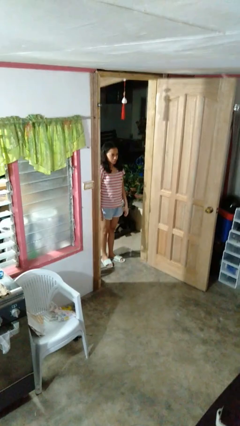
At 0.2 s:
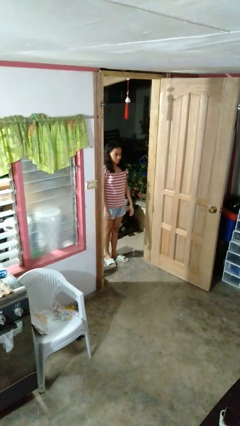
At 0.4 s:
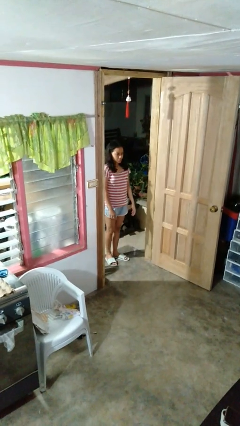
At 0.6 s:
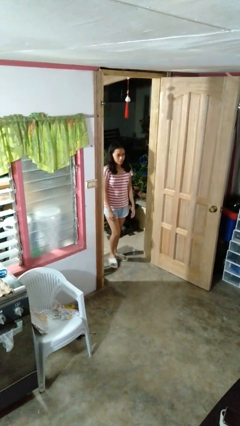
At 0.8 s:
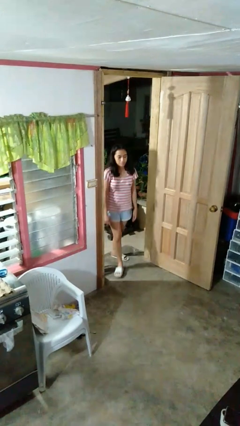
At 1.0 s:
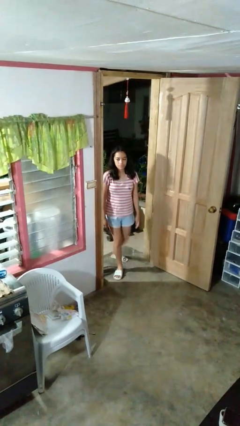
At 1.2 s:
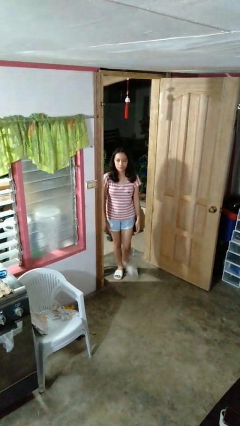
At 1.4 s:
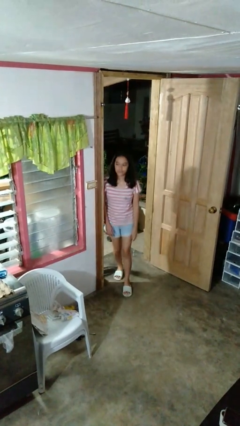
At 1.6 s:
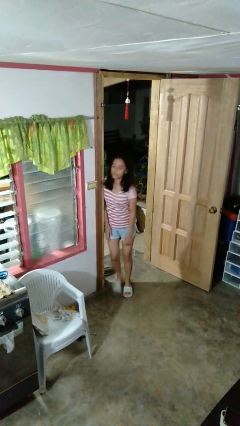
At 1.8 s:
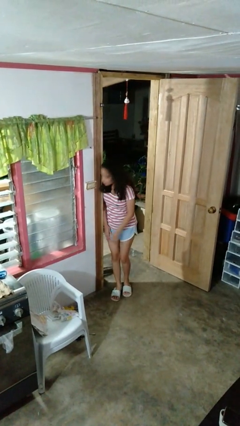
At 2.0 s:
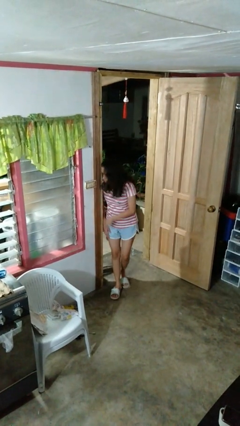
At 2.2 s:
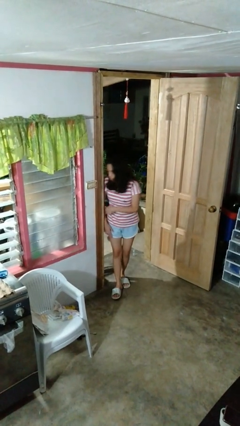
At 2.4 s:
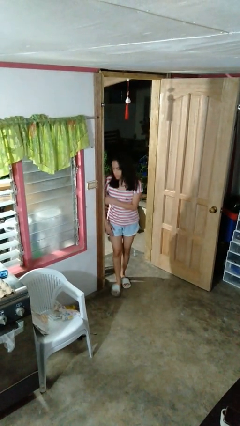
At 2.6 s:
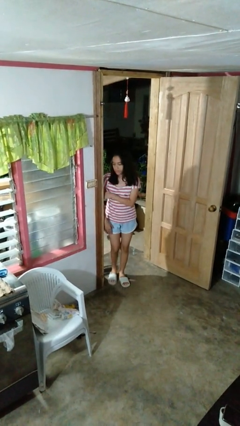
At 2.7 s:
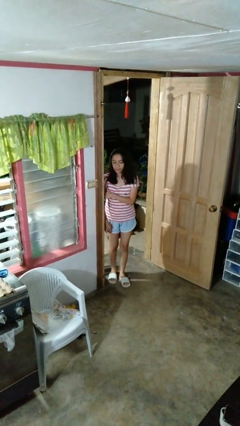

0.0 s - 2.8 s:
person bumps into wall

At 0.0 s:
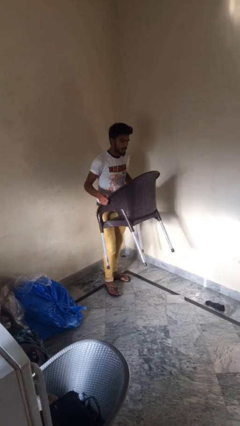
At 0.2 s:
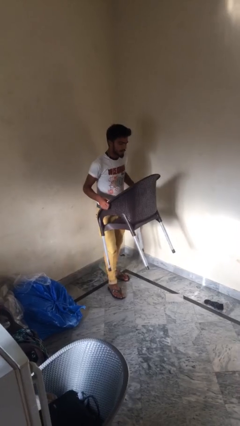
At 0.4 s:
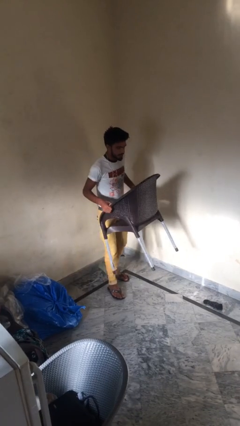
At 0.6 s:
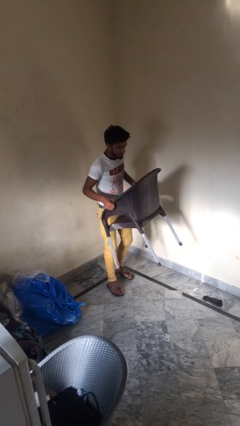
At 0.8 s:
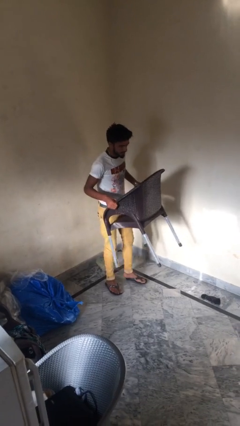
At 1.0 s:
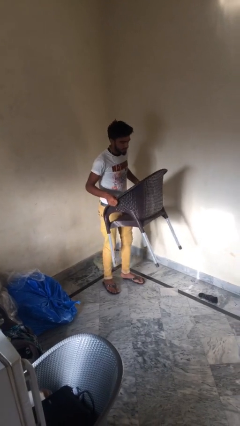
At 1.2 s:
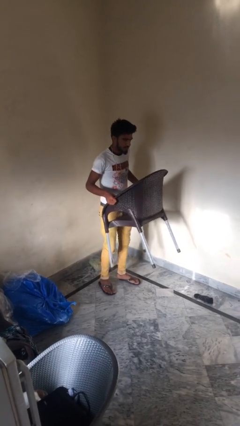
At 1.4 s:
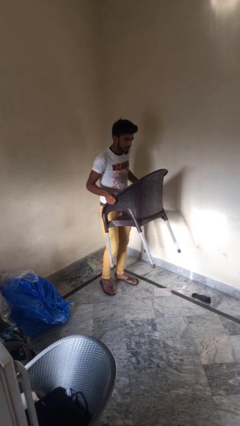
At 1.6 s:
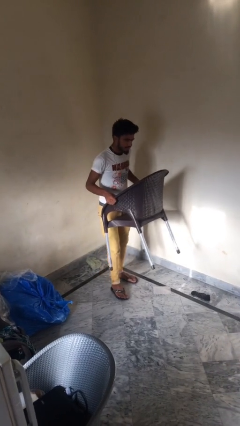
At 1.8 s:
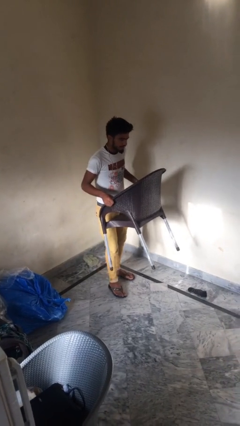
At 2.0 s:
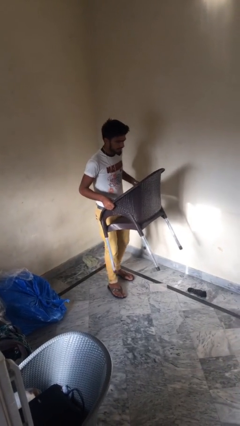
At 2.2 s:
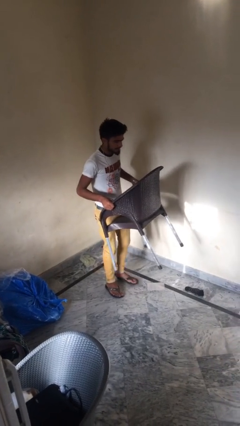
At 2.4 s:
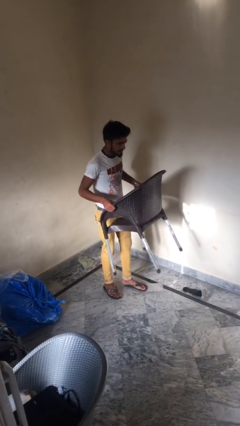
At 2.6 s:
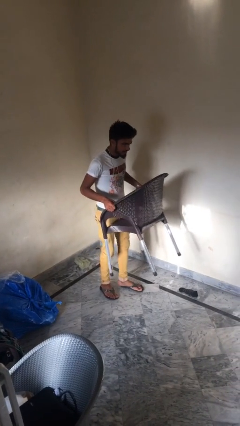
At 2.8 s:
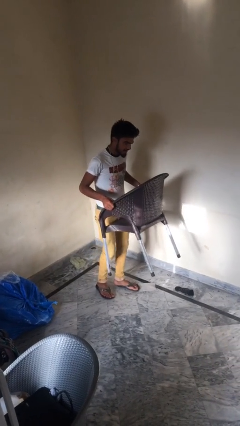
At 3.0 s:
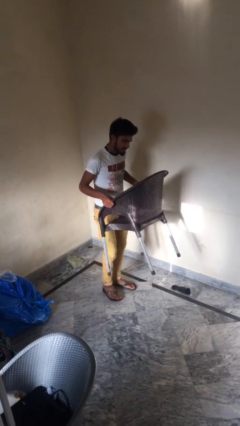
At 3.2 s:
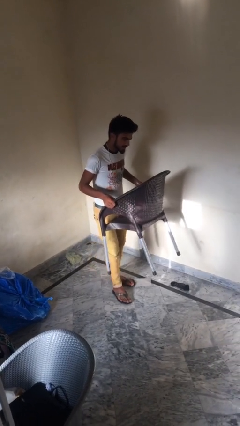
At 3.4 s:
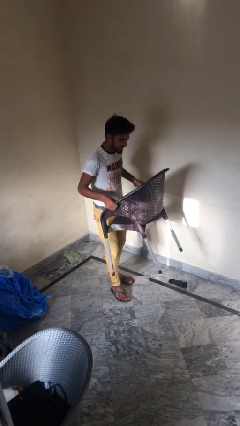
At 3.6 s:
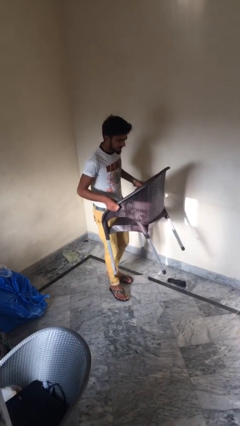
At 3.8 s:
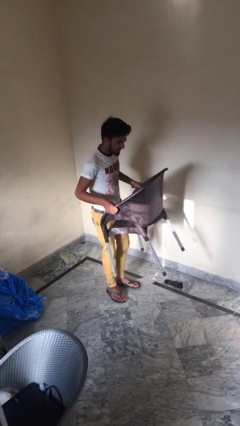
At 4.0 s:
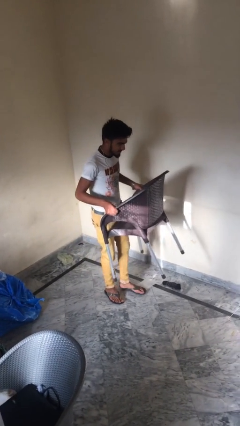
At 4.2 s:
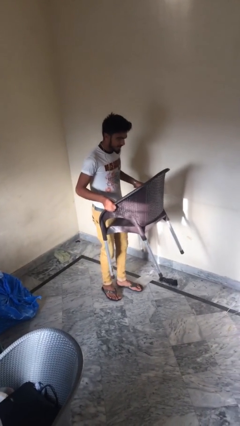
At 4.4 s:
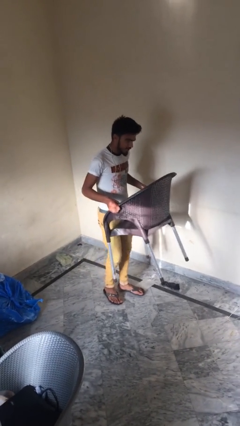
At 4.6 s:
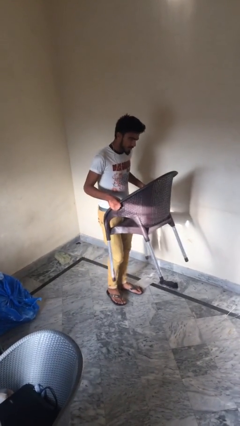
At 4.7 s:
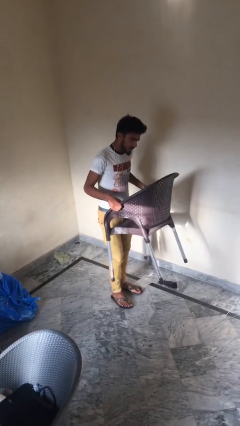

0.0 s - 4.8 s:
person carries heavy object

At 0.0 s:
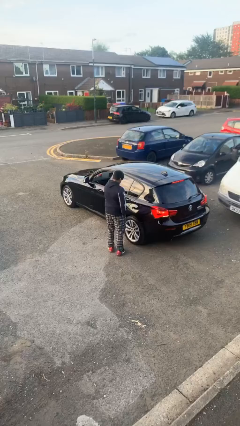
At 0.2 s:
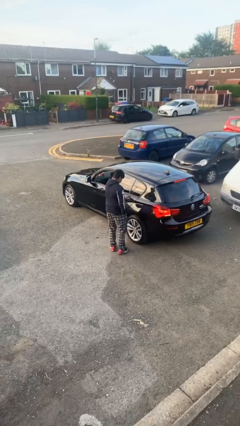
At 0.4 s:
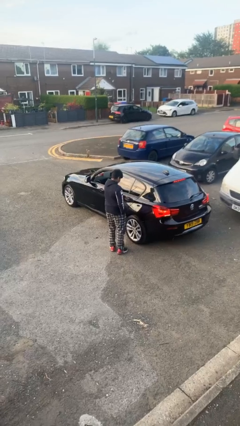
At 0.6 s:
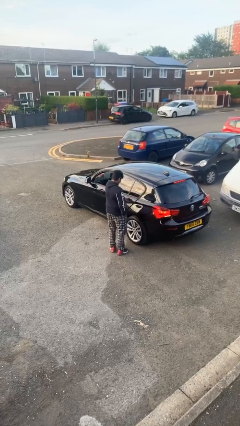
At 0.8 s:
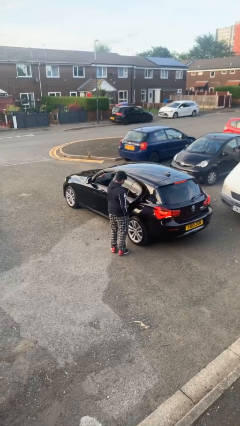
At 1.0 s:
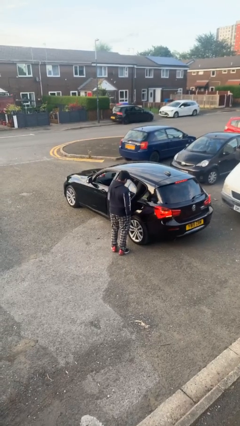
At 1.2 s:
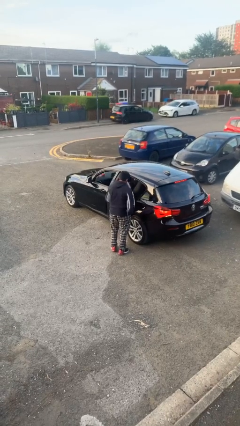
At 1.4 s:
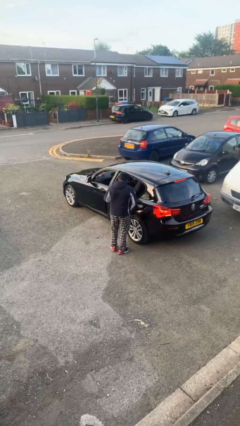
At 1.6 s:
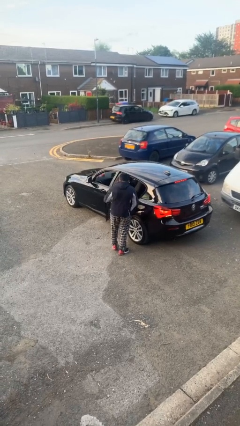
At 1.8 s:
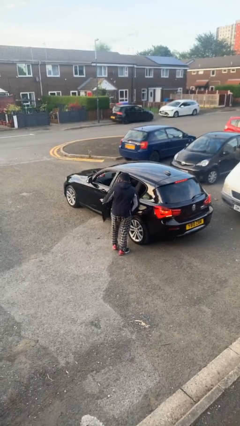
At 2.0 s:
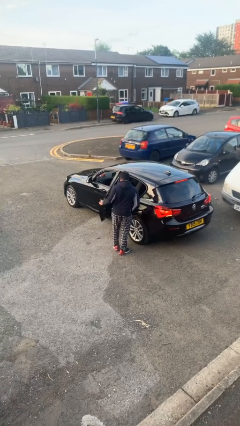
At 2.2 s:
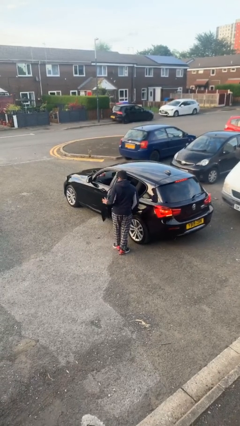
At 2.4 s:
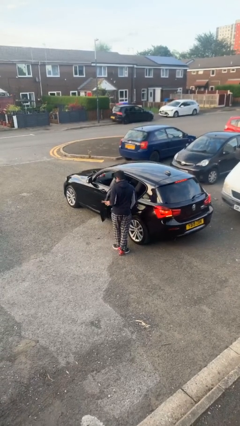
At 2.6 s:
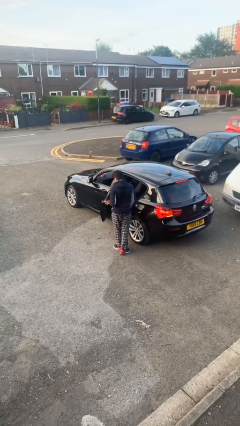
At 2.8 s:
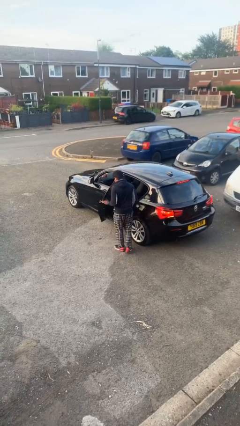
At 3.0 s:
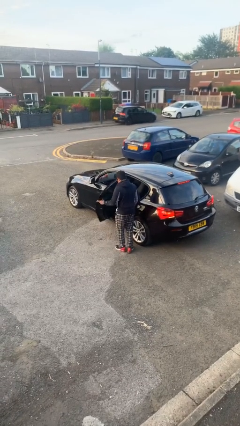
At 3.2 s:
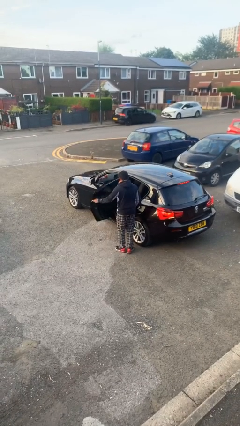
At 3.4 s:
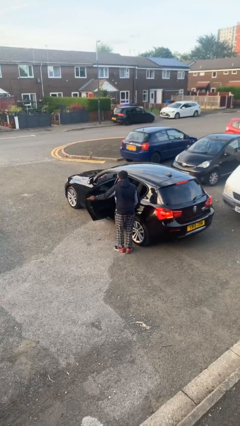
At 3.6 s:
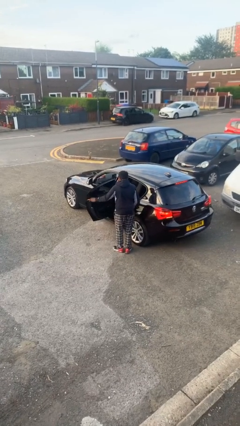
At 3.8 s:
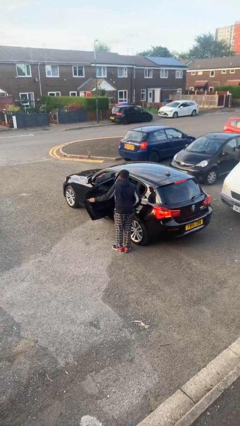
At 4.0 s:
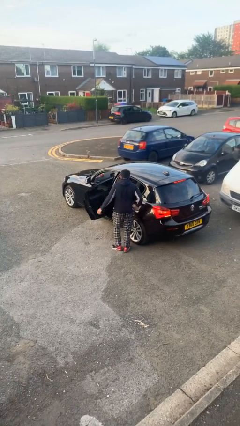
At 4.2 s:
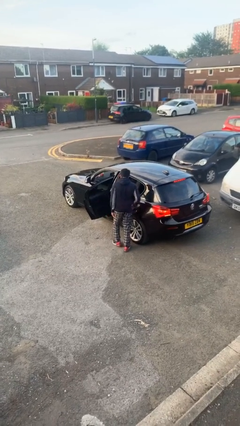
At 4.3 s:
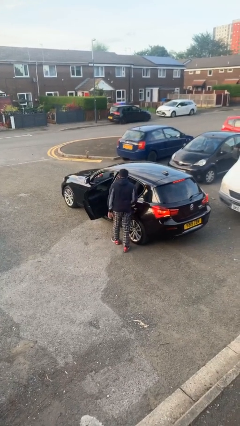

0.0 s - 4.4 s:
person opens car door

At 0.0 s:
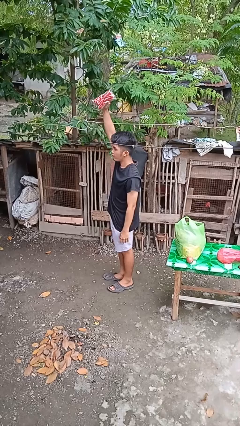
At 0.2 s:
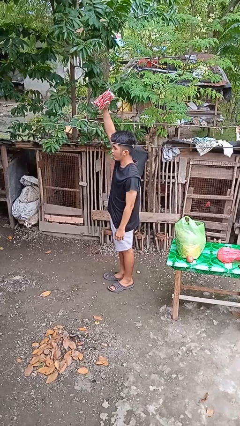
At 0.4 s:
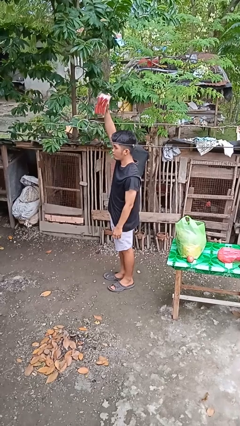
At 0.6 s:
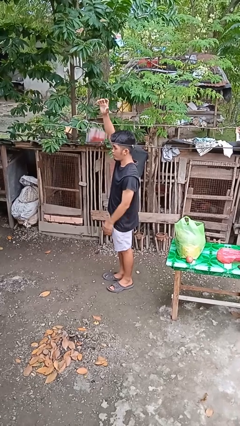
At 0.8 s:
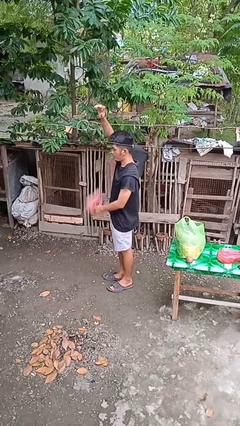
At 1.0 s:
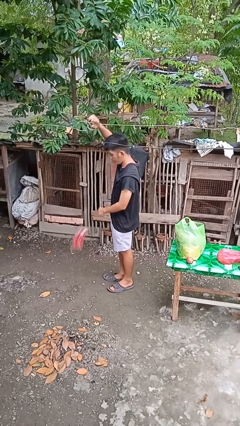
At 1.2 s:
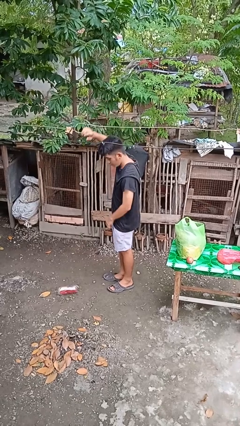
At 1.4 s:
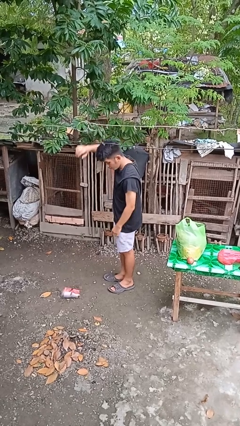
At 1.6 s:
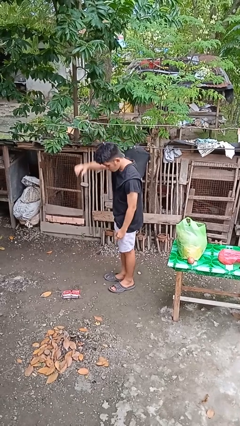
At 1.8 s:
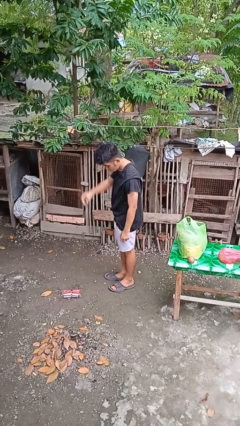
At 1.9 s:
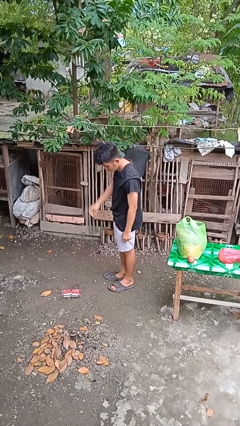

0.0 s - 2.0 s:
person drops object

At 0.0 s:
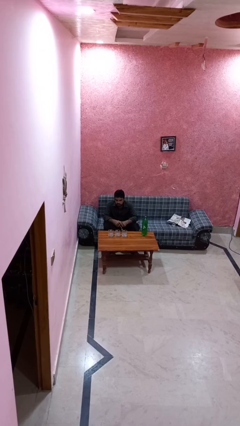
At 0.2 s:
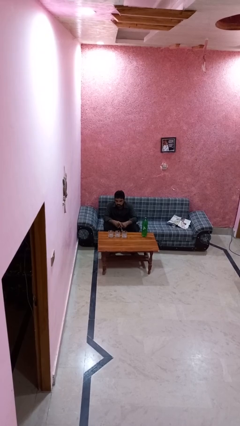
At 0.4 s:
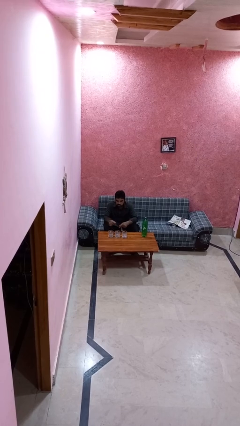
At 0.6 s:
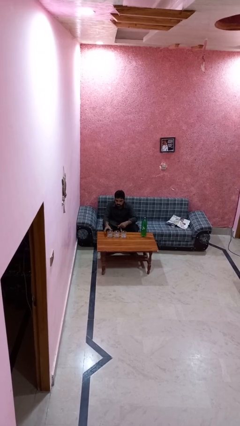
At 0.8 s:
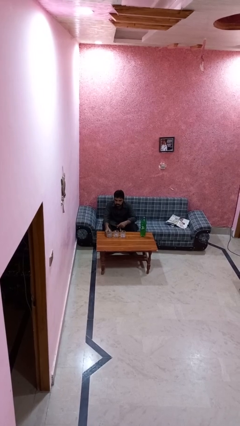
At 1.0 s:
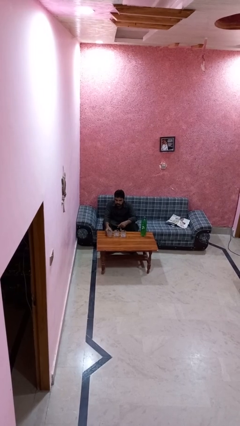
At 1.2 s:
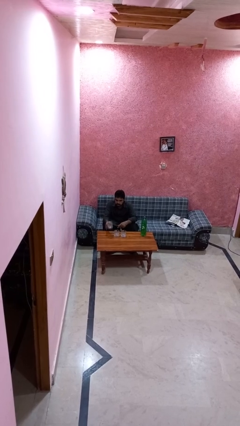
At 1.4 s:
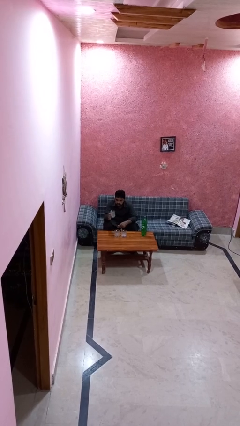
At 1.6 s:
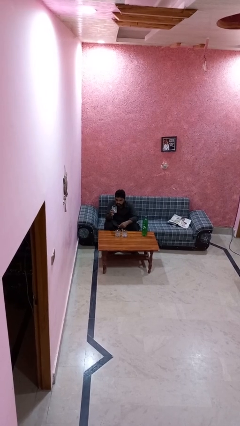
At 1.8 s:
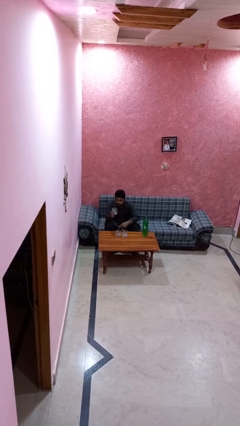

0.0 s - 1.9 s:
person picks up object from table

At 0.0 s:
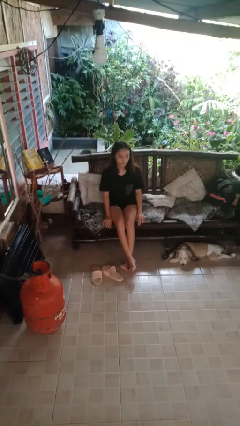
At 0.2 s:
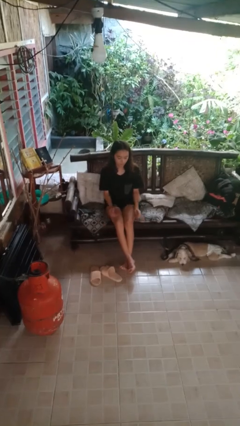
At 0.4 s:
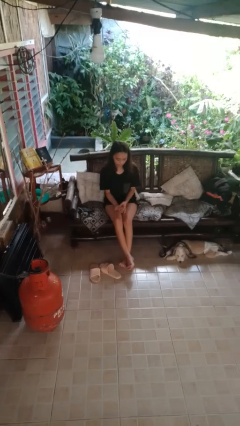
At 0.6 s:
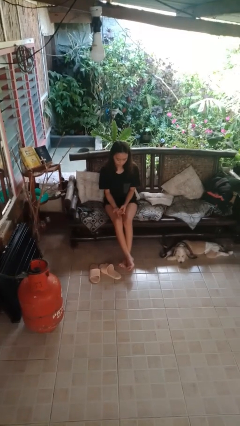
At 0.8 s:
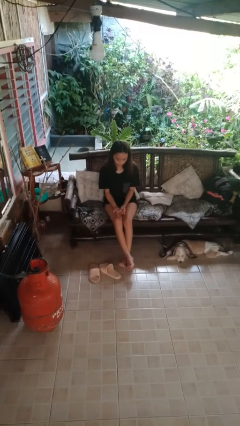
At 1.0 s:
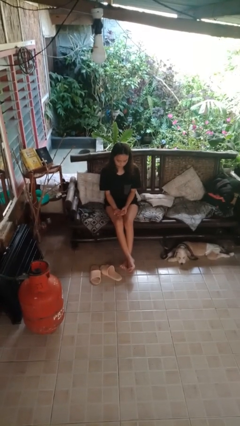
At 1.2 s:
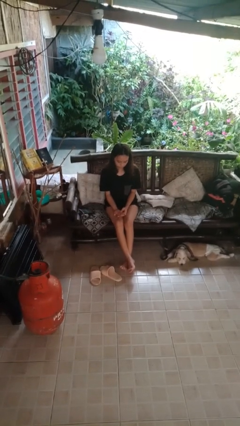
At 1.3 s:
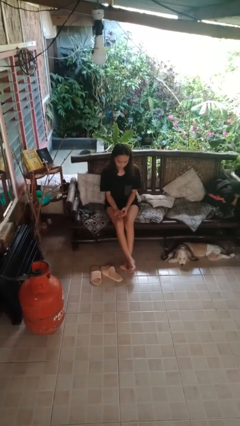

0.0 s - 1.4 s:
person looks at hands in lap
